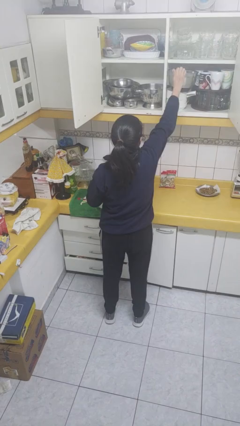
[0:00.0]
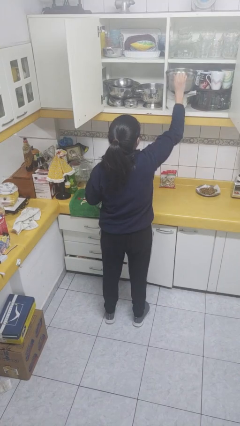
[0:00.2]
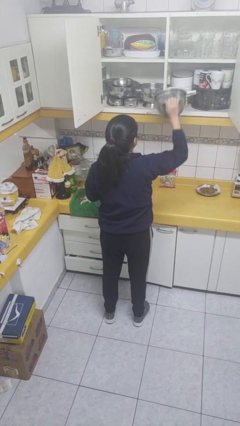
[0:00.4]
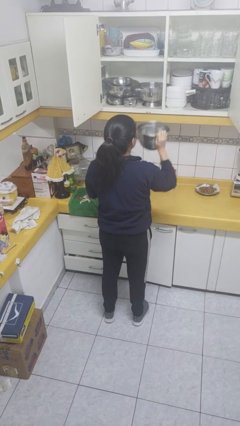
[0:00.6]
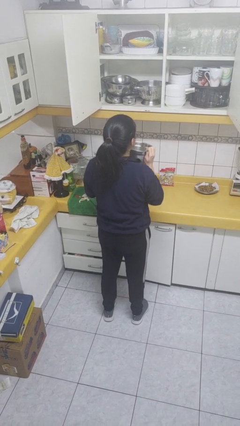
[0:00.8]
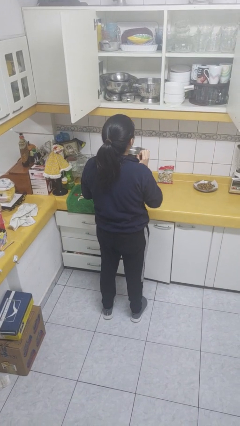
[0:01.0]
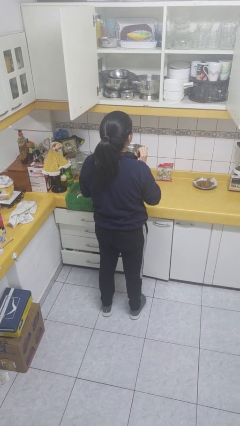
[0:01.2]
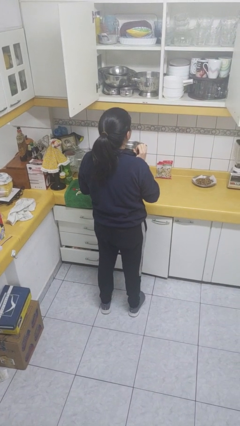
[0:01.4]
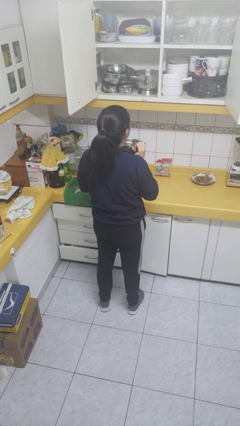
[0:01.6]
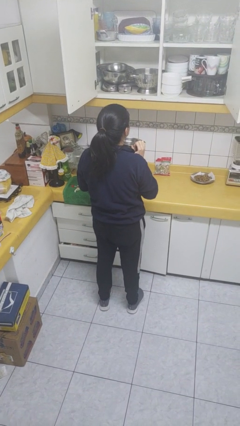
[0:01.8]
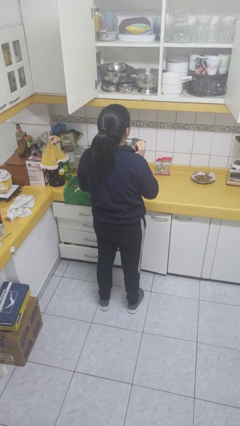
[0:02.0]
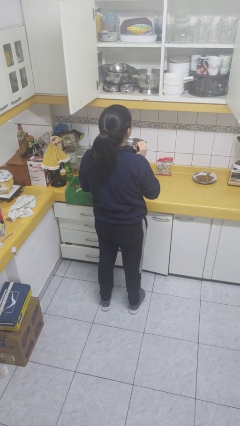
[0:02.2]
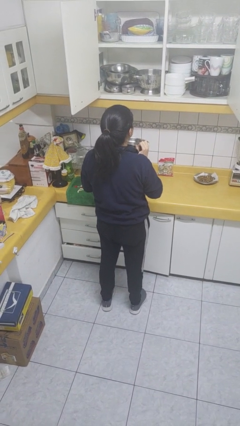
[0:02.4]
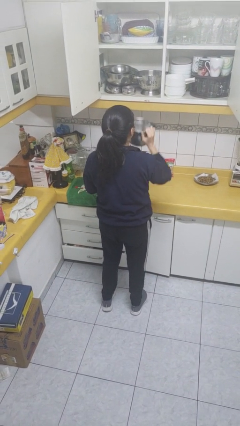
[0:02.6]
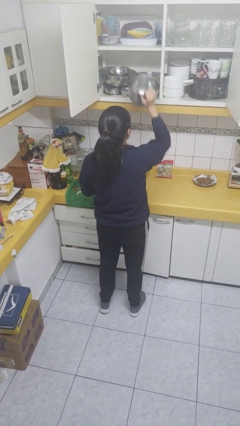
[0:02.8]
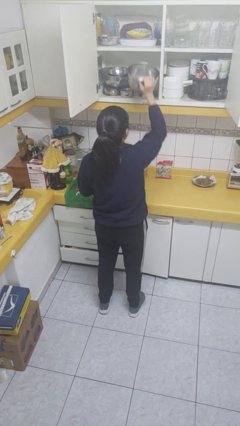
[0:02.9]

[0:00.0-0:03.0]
person picks up object from cabinet

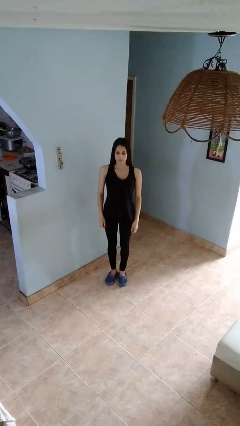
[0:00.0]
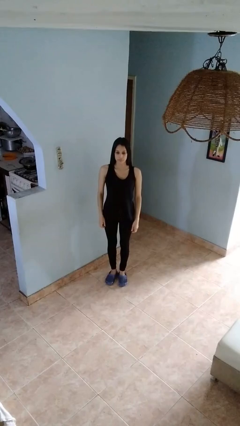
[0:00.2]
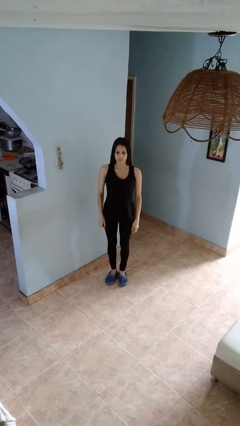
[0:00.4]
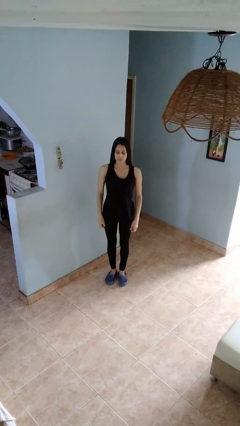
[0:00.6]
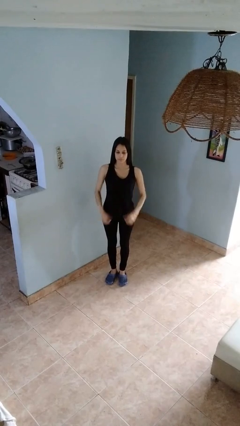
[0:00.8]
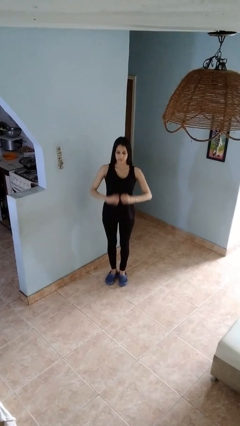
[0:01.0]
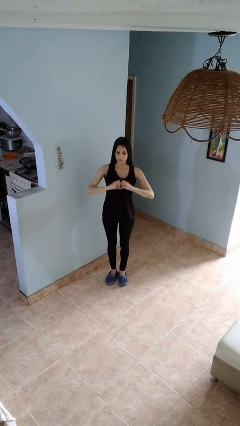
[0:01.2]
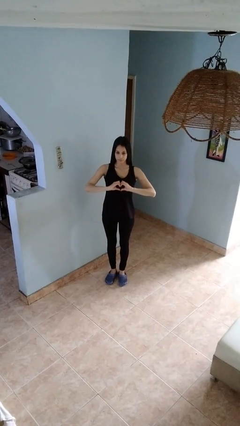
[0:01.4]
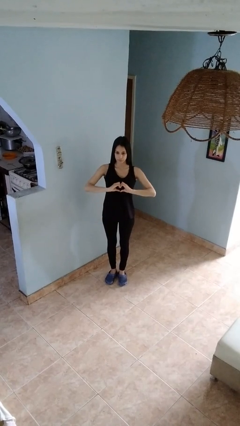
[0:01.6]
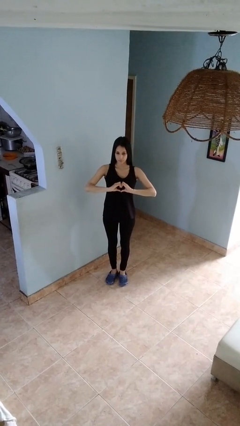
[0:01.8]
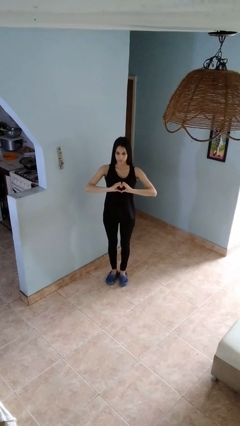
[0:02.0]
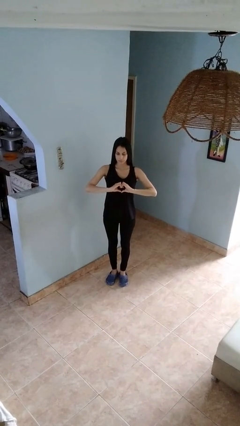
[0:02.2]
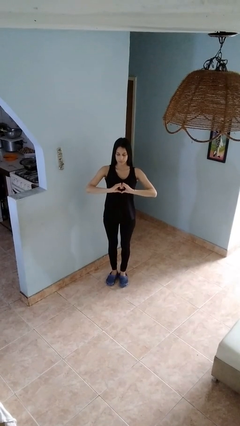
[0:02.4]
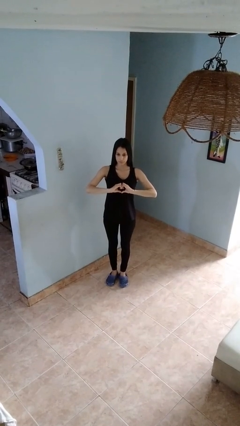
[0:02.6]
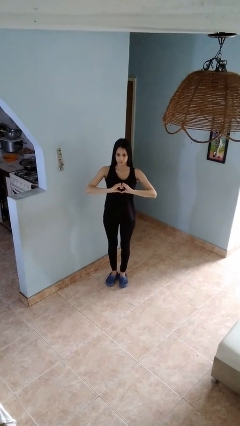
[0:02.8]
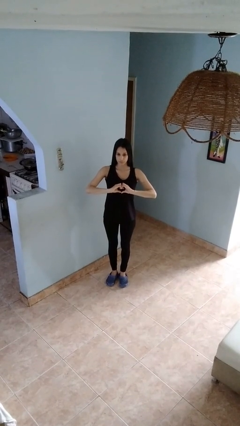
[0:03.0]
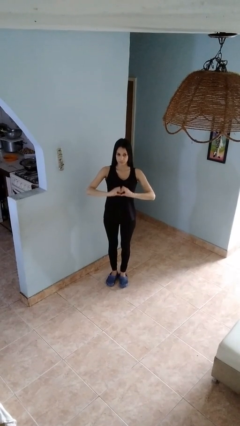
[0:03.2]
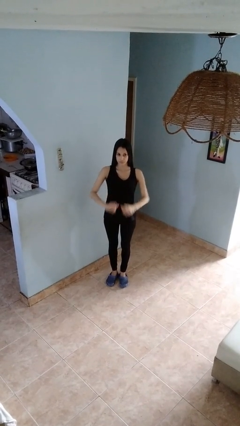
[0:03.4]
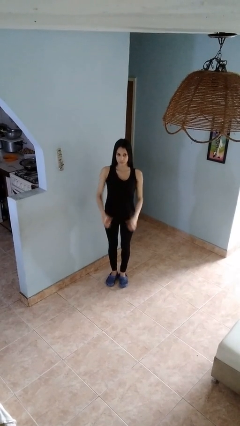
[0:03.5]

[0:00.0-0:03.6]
person gestures heart

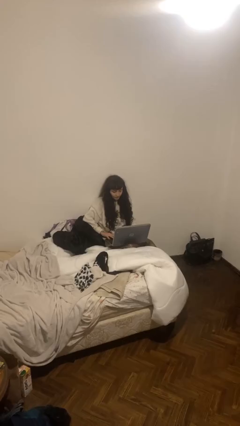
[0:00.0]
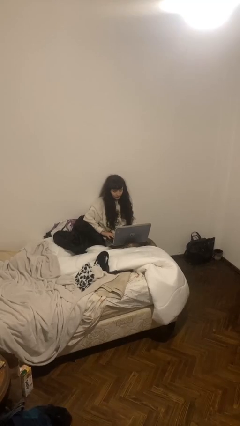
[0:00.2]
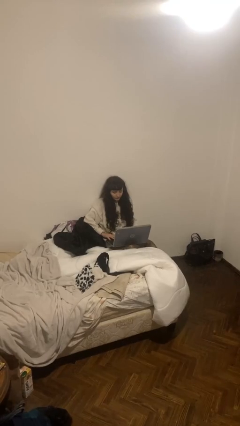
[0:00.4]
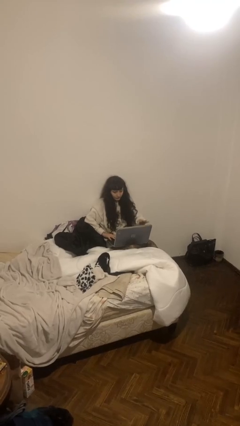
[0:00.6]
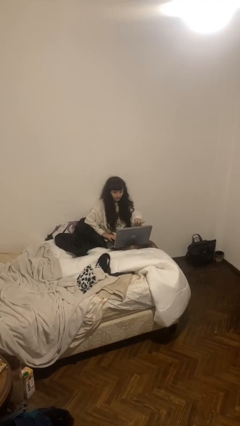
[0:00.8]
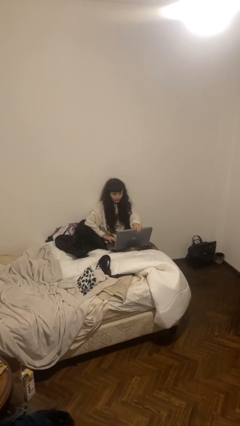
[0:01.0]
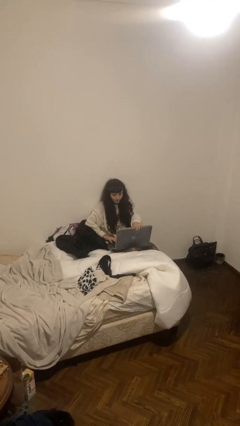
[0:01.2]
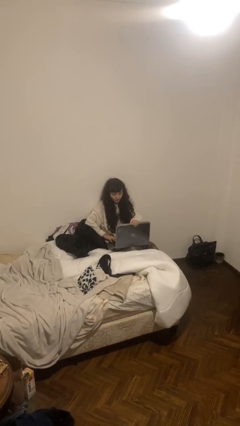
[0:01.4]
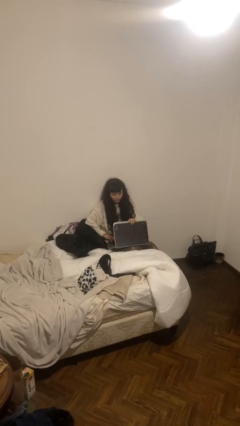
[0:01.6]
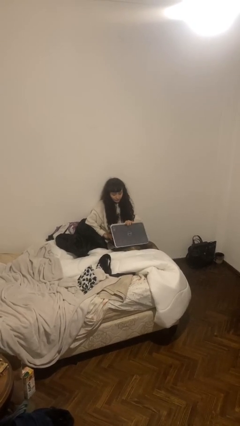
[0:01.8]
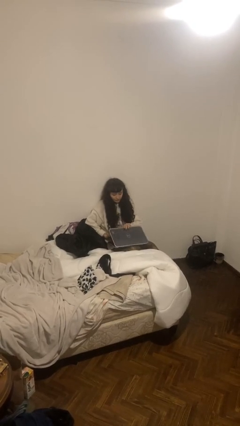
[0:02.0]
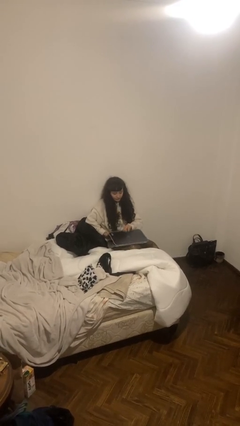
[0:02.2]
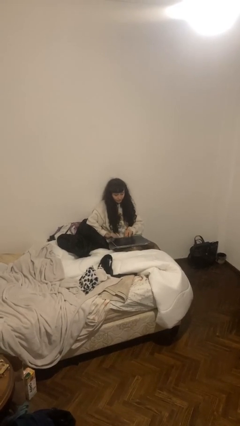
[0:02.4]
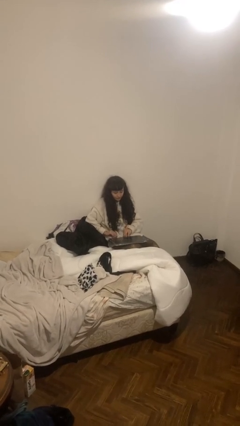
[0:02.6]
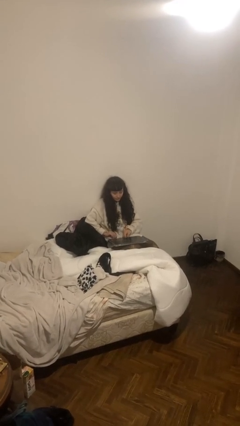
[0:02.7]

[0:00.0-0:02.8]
person closes laptop

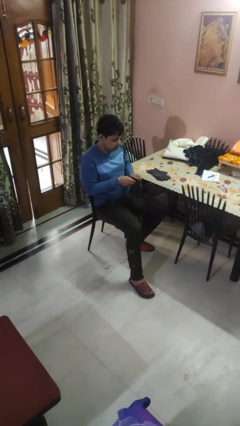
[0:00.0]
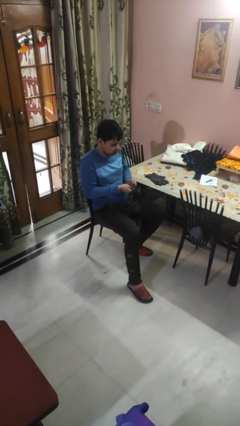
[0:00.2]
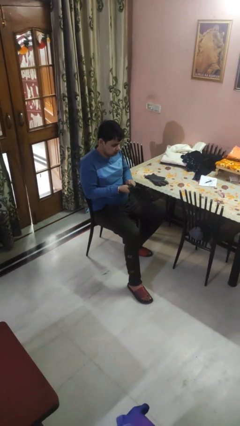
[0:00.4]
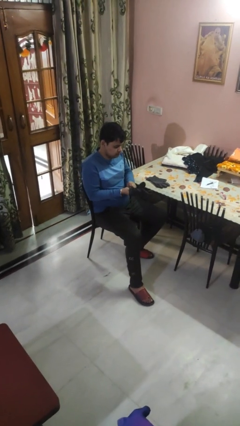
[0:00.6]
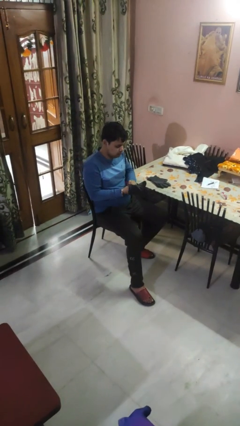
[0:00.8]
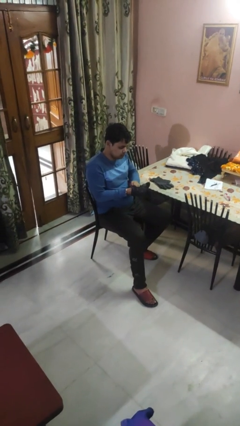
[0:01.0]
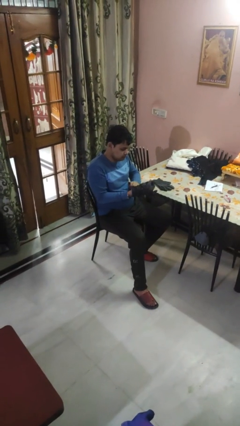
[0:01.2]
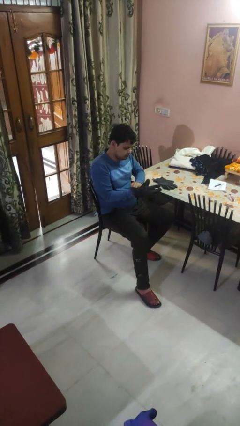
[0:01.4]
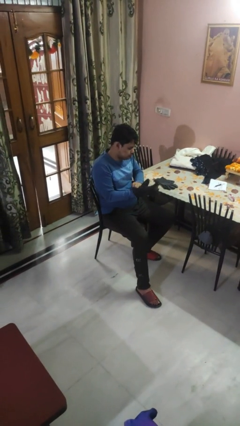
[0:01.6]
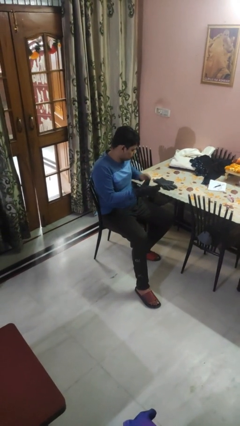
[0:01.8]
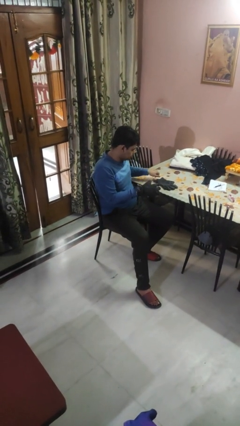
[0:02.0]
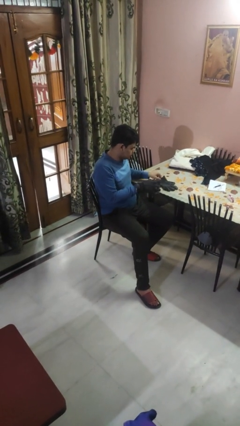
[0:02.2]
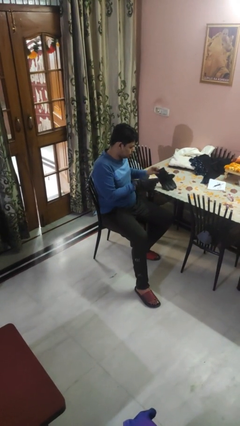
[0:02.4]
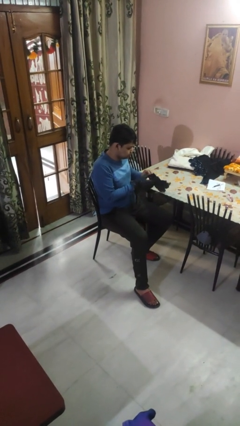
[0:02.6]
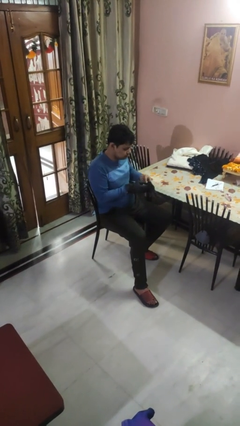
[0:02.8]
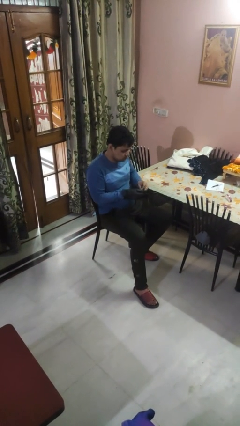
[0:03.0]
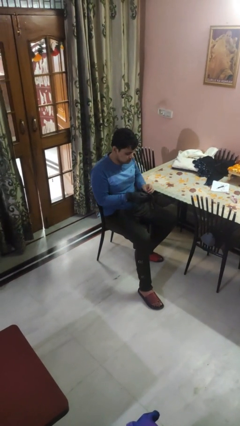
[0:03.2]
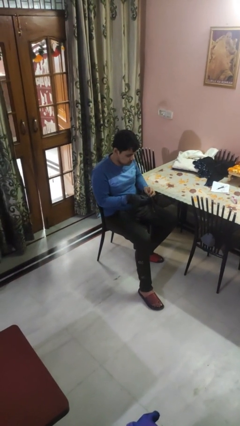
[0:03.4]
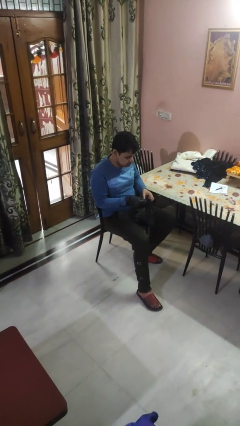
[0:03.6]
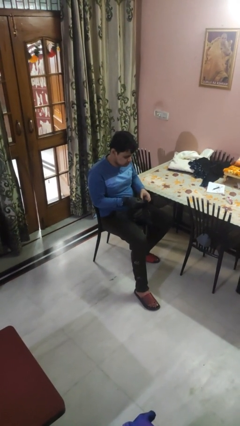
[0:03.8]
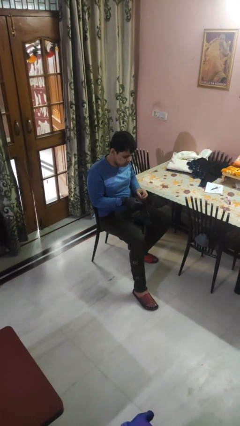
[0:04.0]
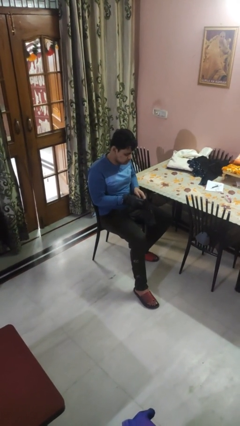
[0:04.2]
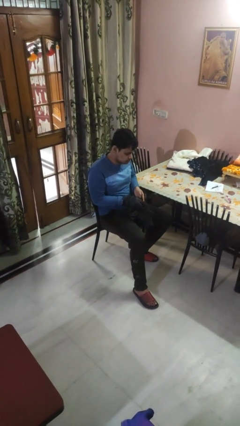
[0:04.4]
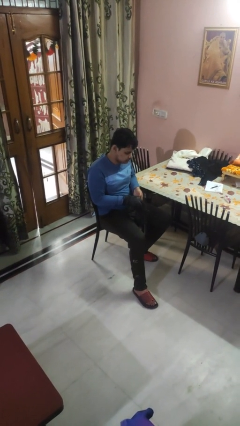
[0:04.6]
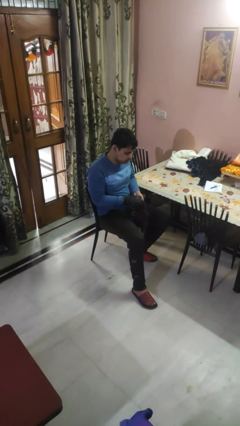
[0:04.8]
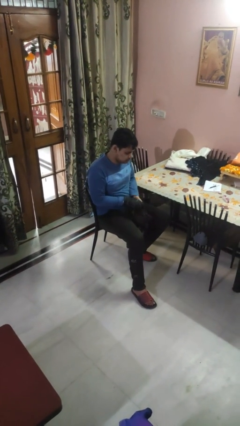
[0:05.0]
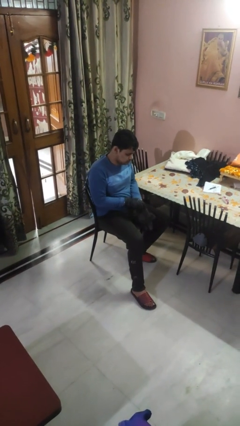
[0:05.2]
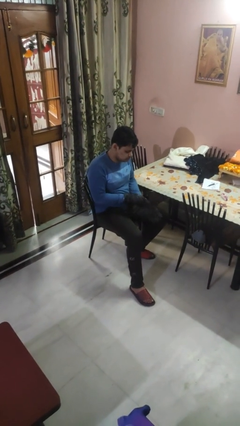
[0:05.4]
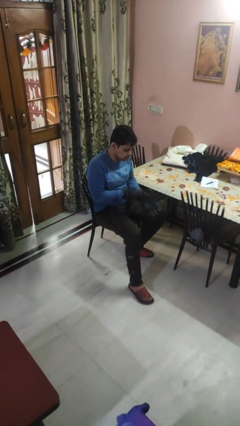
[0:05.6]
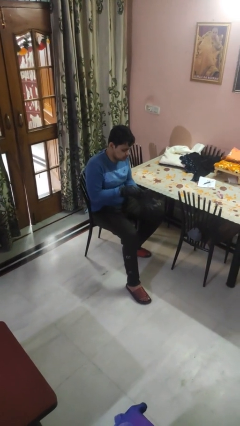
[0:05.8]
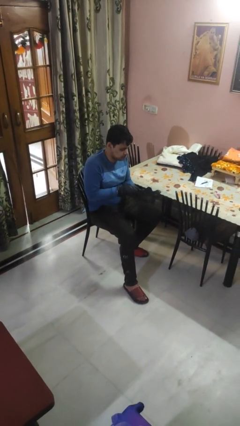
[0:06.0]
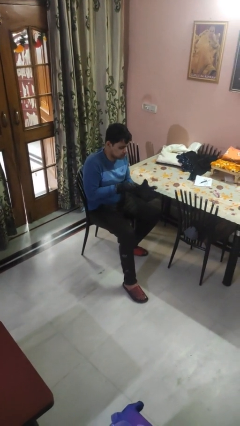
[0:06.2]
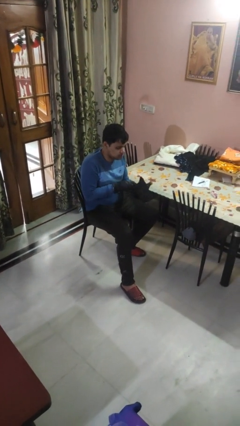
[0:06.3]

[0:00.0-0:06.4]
person puts on gloves

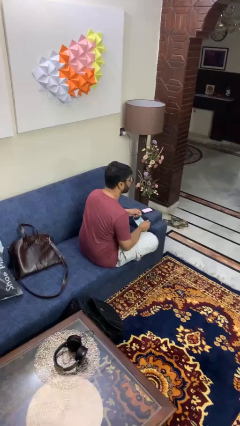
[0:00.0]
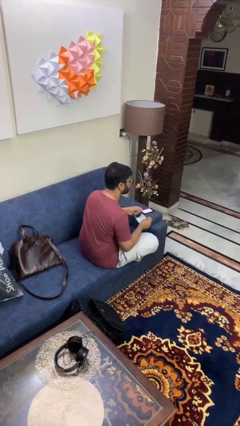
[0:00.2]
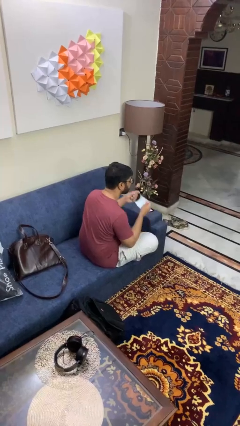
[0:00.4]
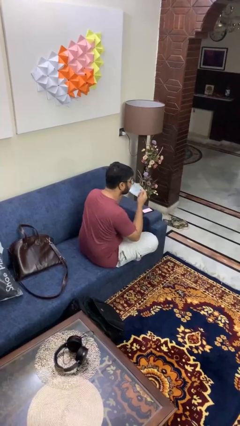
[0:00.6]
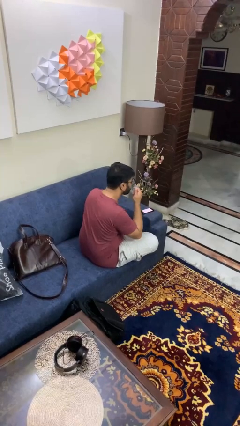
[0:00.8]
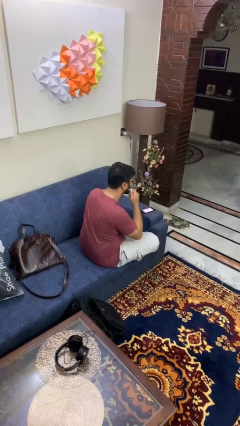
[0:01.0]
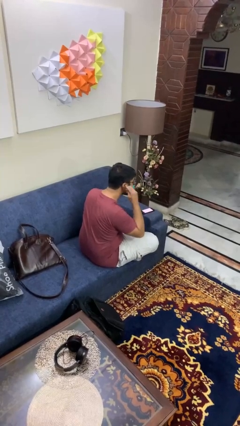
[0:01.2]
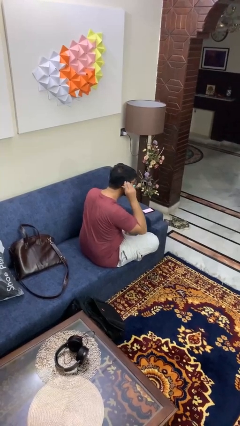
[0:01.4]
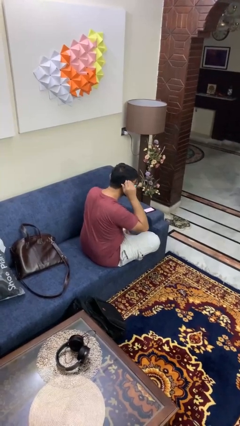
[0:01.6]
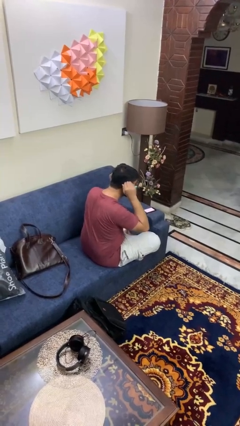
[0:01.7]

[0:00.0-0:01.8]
person puts on facemask
